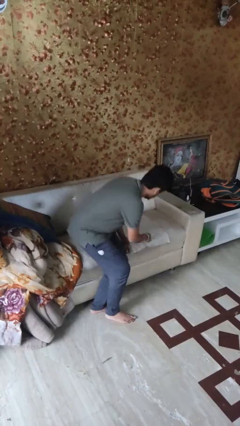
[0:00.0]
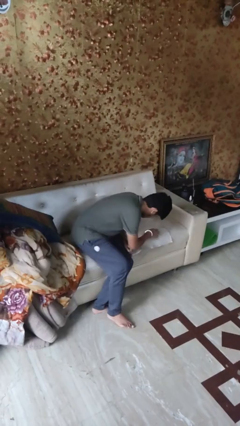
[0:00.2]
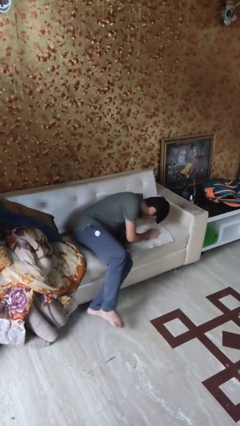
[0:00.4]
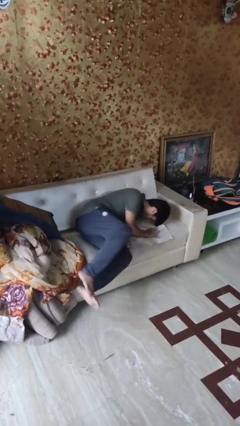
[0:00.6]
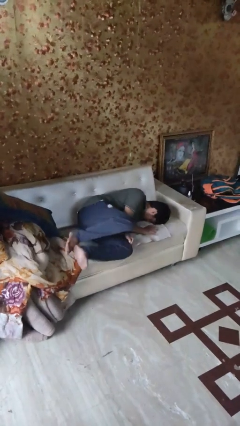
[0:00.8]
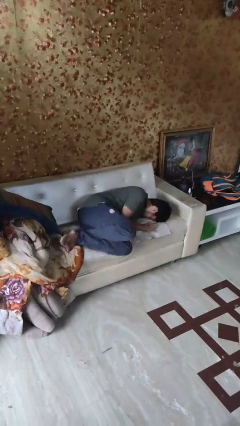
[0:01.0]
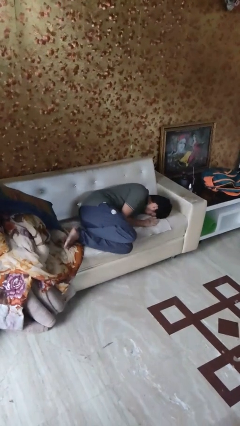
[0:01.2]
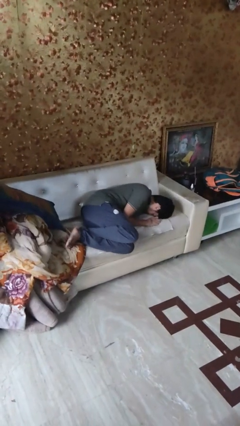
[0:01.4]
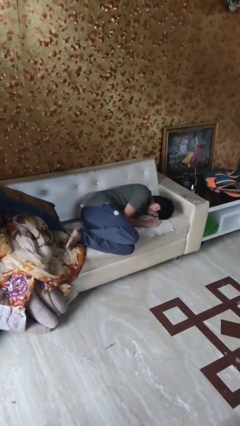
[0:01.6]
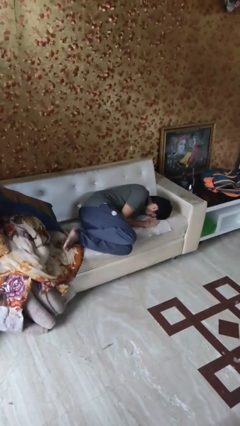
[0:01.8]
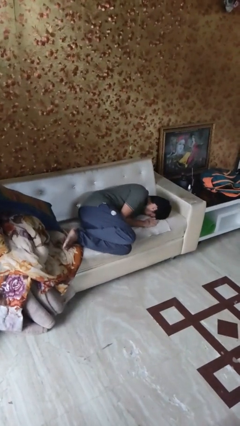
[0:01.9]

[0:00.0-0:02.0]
person lies down on couch

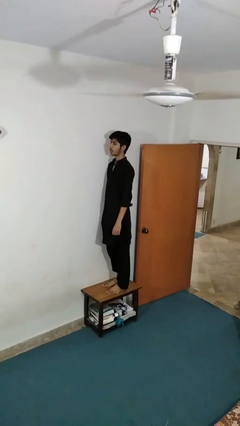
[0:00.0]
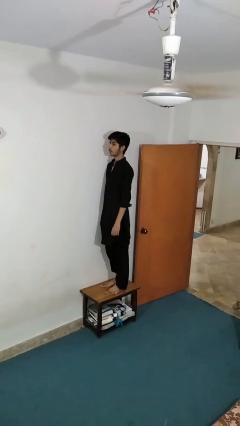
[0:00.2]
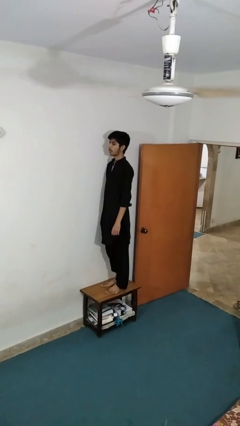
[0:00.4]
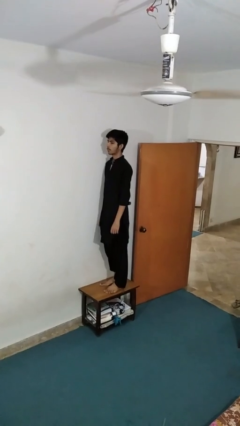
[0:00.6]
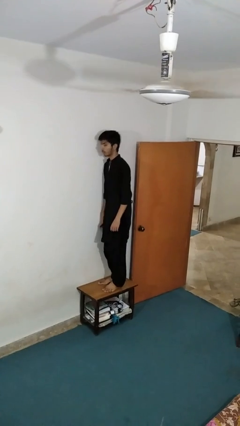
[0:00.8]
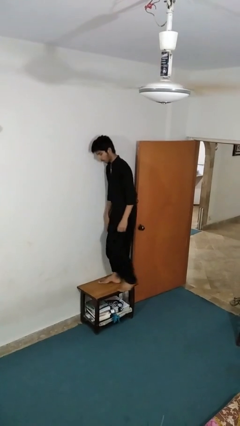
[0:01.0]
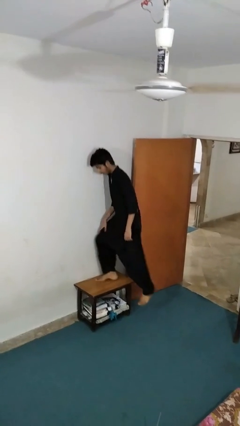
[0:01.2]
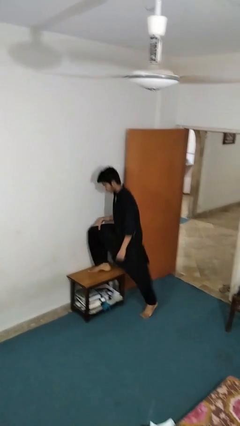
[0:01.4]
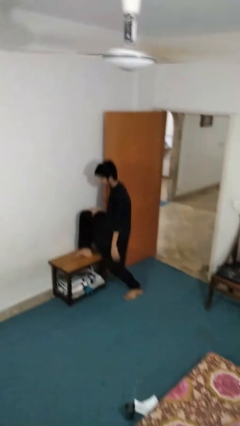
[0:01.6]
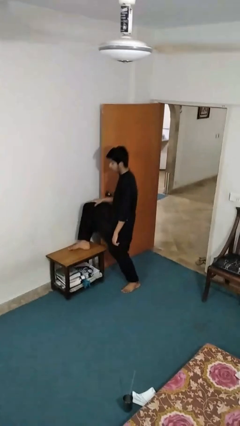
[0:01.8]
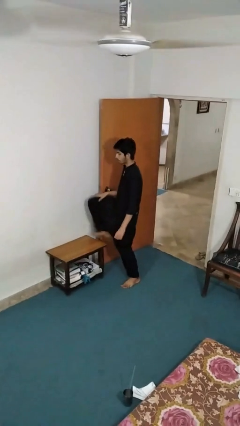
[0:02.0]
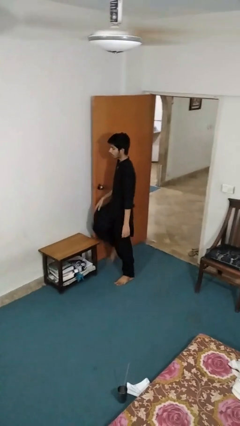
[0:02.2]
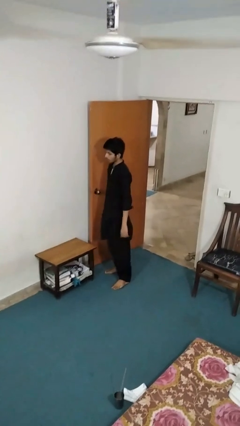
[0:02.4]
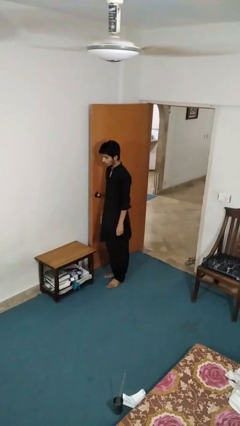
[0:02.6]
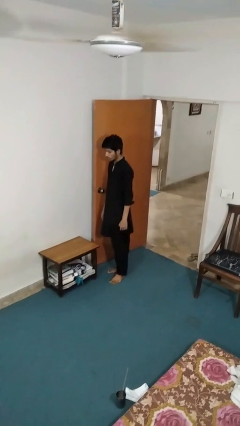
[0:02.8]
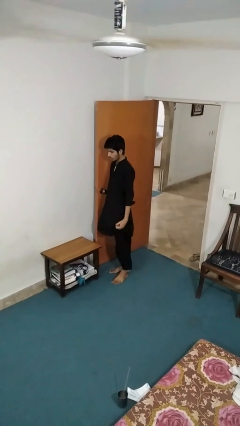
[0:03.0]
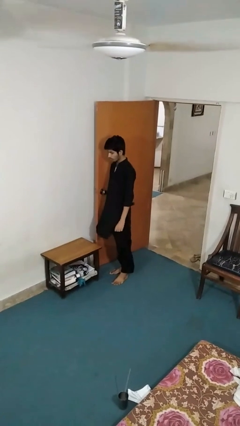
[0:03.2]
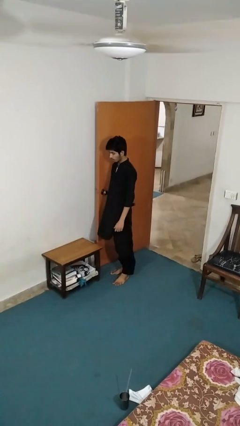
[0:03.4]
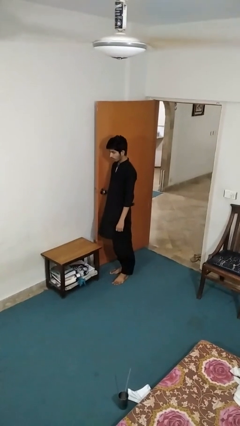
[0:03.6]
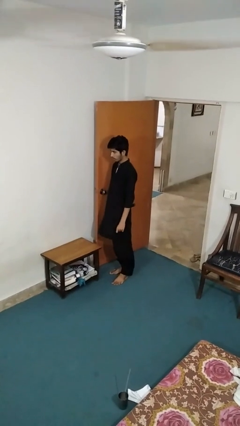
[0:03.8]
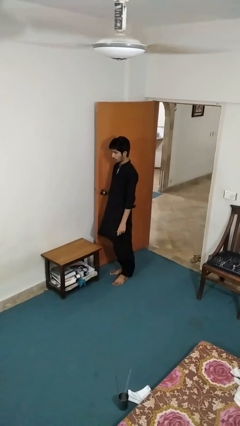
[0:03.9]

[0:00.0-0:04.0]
person climbs off table

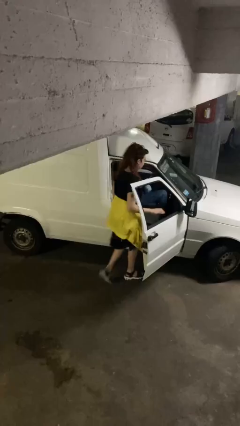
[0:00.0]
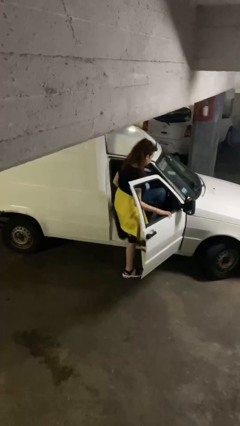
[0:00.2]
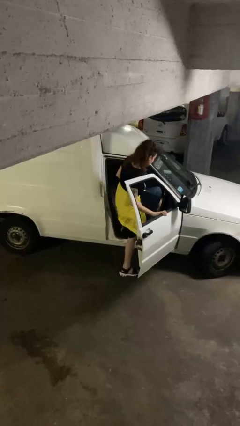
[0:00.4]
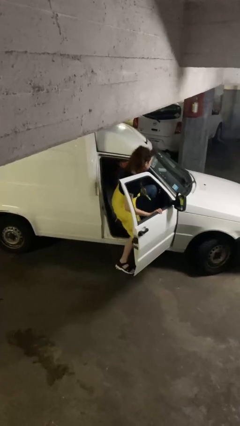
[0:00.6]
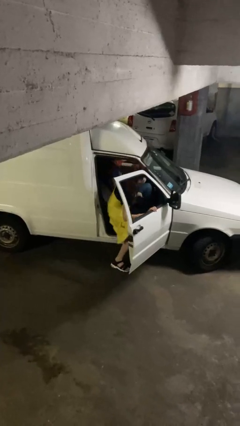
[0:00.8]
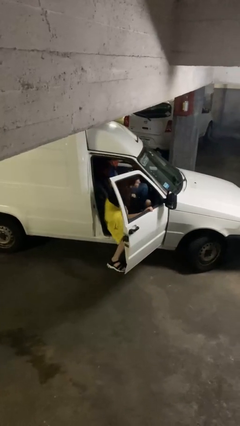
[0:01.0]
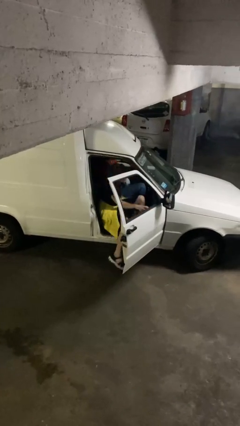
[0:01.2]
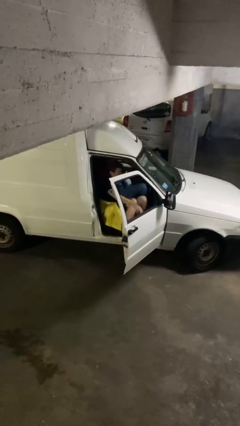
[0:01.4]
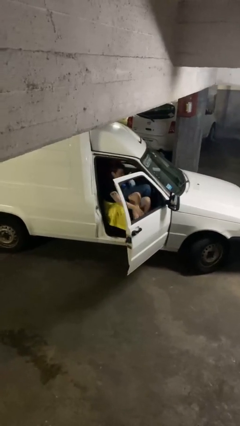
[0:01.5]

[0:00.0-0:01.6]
person enters car

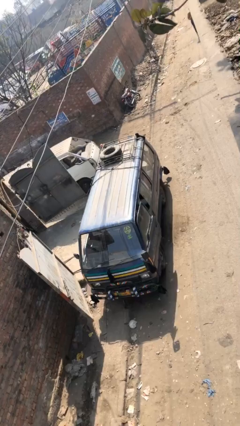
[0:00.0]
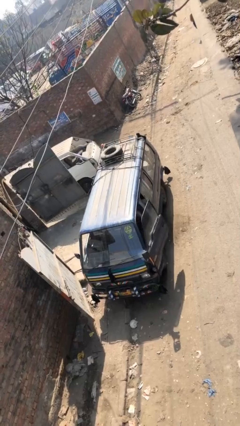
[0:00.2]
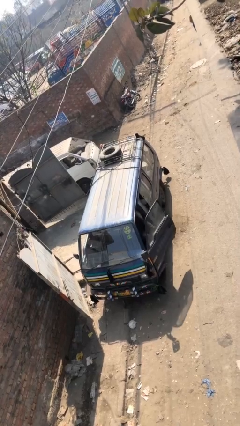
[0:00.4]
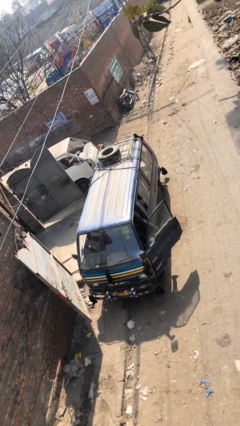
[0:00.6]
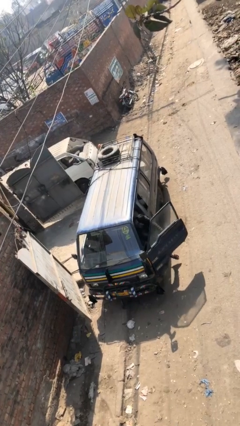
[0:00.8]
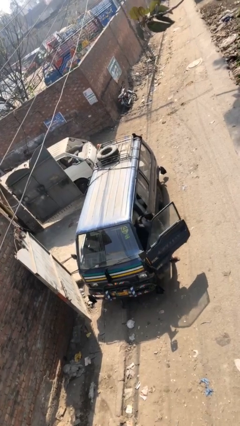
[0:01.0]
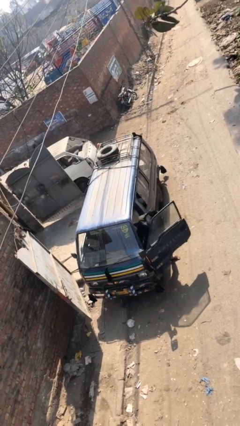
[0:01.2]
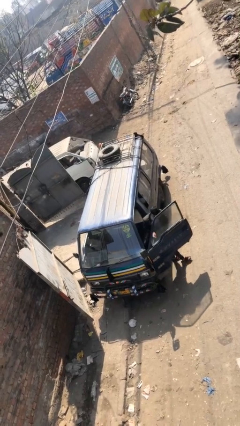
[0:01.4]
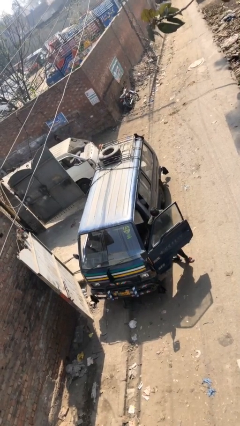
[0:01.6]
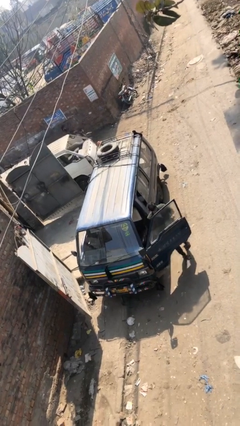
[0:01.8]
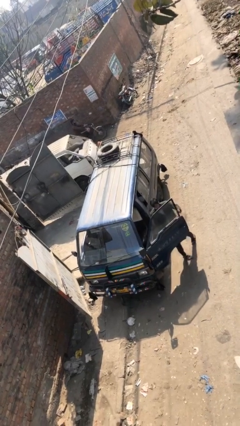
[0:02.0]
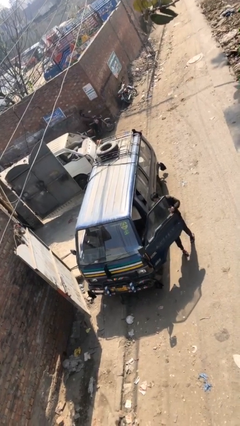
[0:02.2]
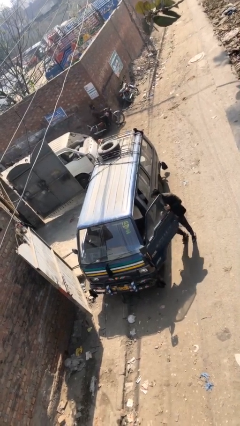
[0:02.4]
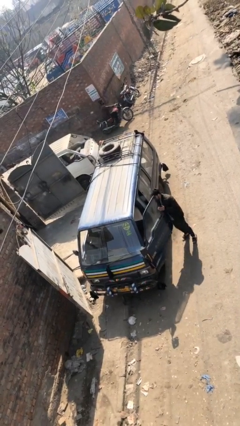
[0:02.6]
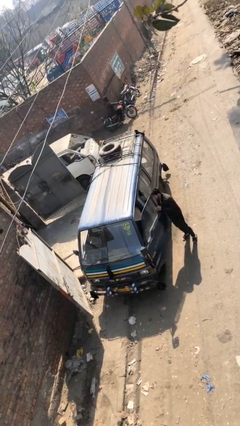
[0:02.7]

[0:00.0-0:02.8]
car drops off person

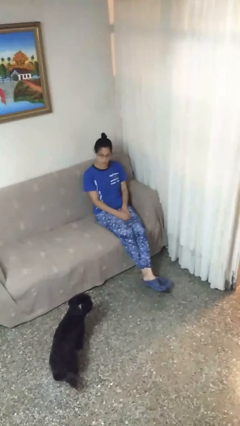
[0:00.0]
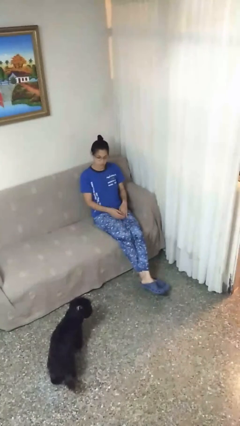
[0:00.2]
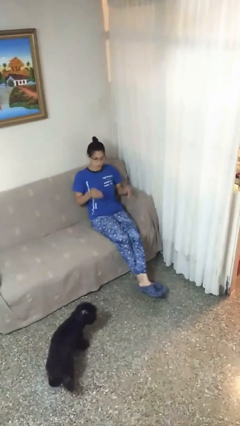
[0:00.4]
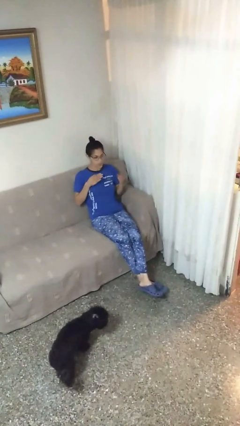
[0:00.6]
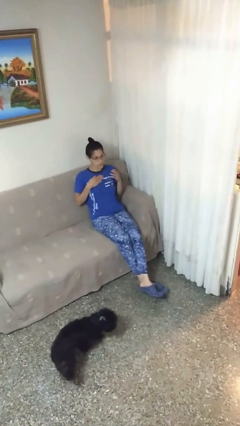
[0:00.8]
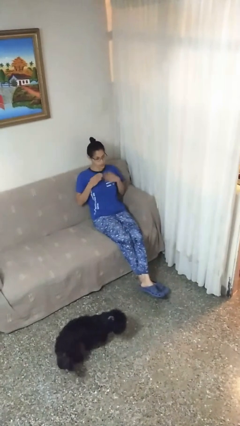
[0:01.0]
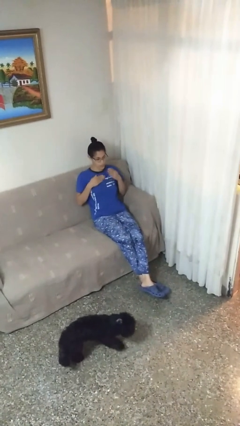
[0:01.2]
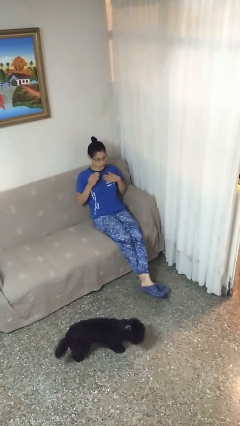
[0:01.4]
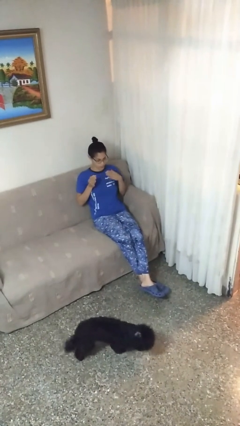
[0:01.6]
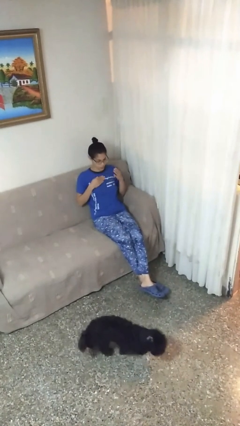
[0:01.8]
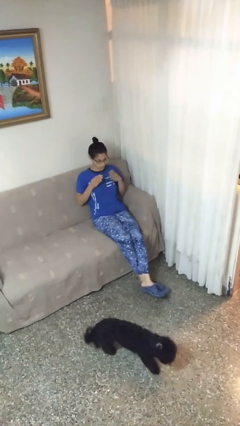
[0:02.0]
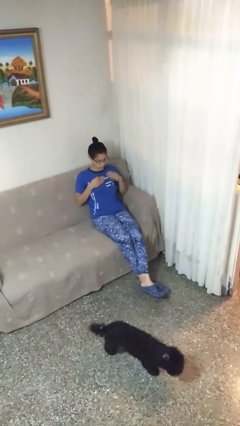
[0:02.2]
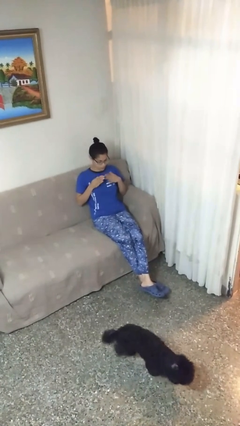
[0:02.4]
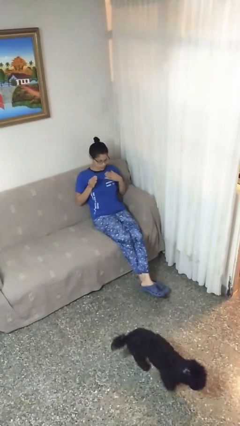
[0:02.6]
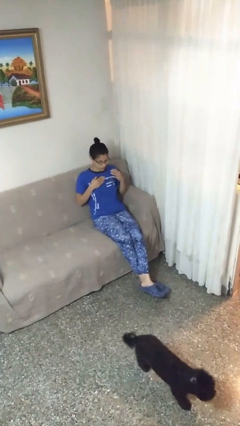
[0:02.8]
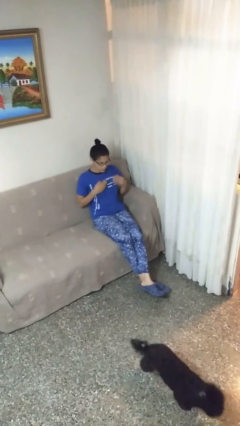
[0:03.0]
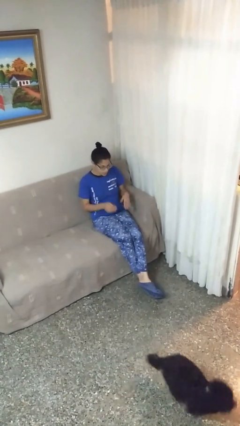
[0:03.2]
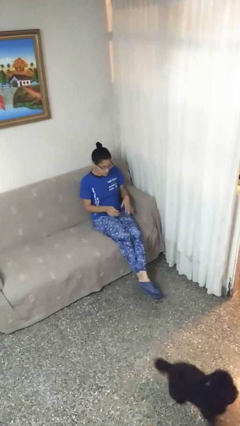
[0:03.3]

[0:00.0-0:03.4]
person drums on chest

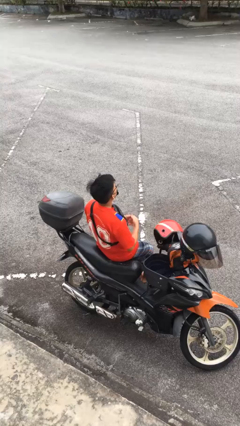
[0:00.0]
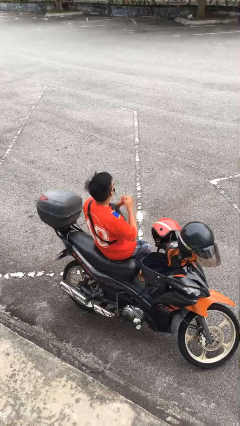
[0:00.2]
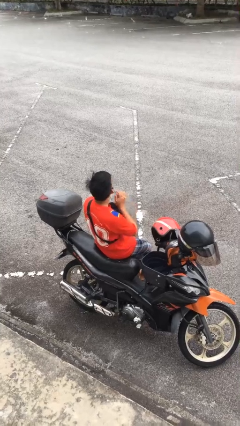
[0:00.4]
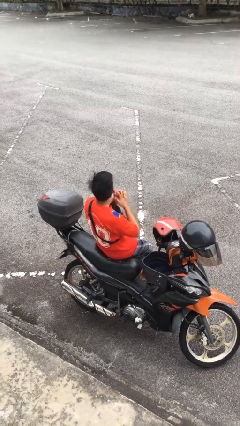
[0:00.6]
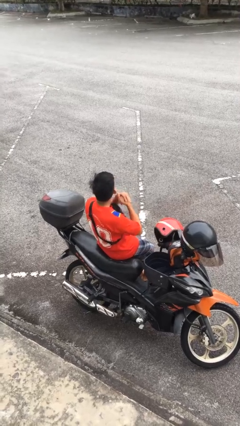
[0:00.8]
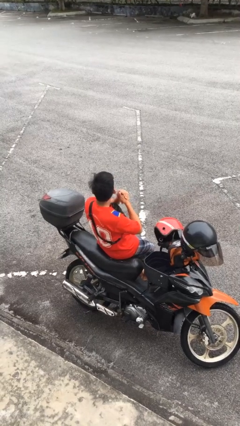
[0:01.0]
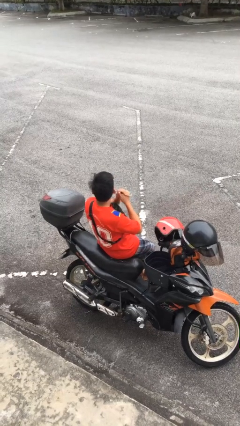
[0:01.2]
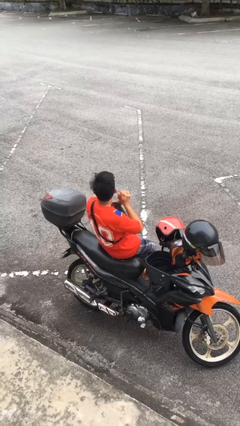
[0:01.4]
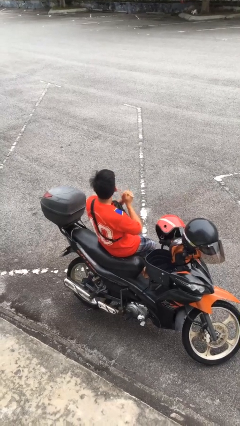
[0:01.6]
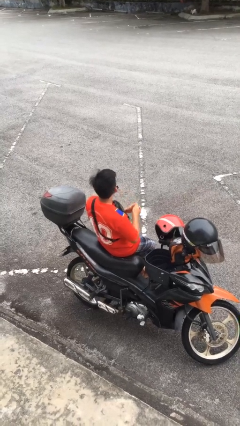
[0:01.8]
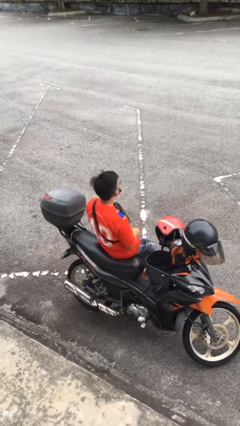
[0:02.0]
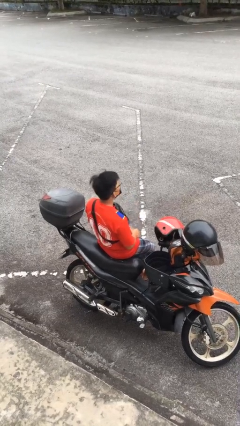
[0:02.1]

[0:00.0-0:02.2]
person cracks knuckles

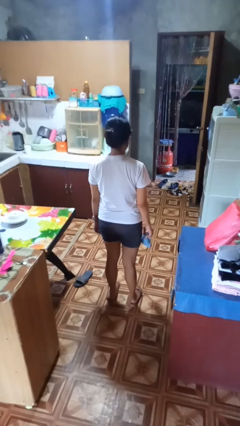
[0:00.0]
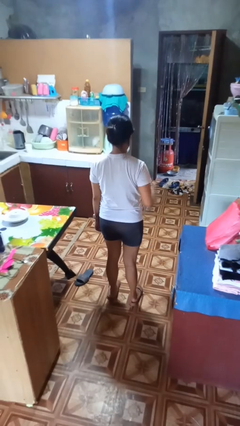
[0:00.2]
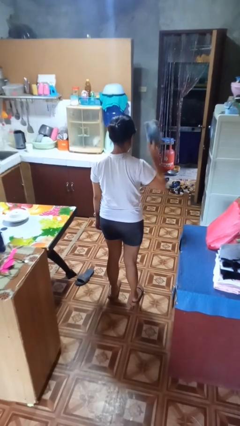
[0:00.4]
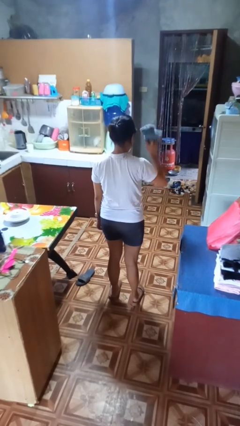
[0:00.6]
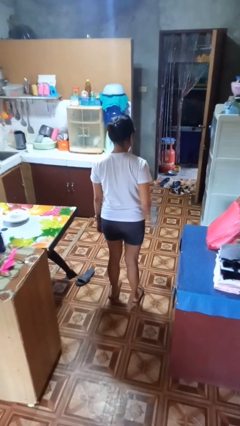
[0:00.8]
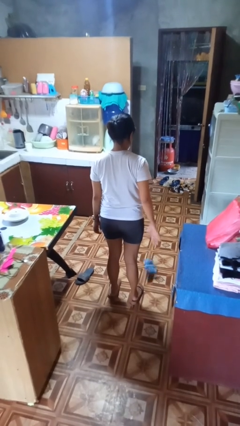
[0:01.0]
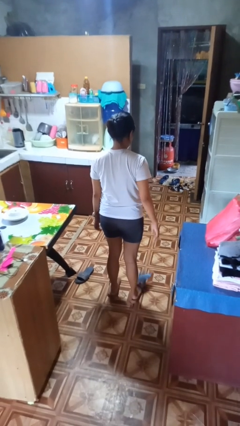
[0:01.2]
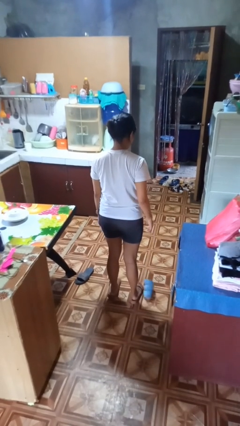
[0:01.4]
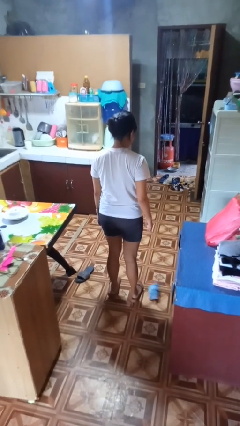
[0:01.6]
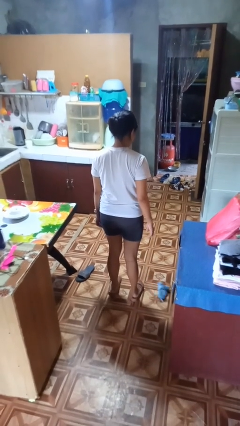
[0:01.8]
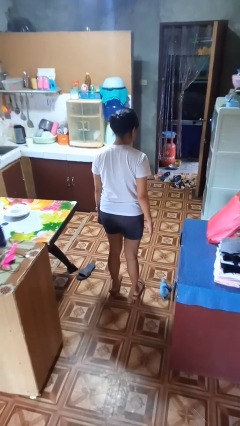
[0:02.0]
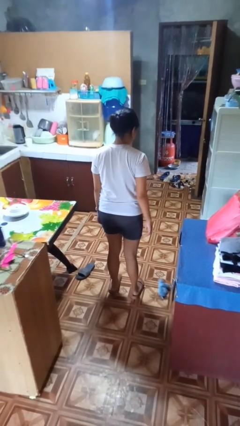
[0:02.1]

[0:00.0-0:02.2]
person throws object to ground
